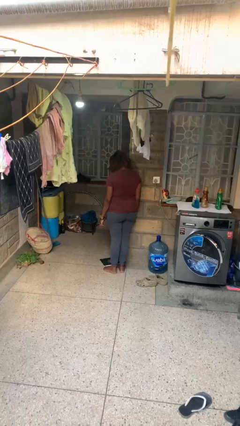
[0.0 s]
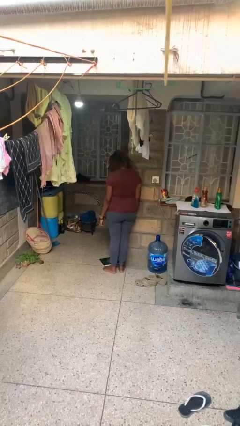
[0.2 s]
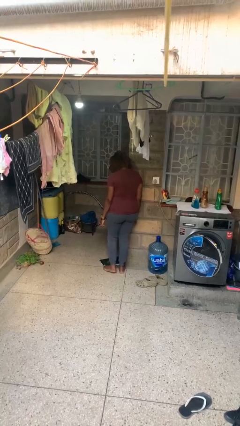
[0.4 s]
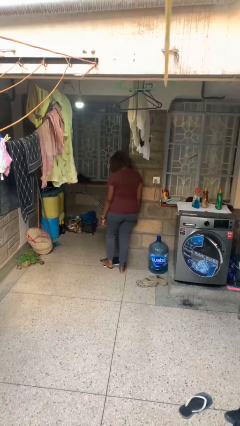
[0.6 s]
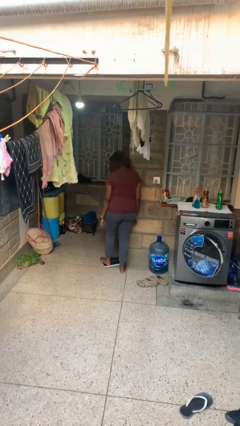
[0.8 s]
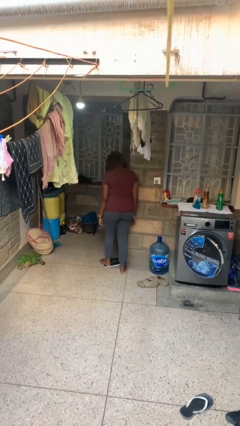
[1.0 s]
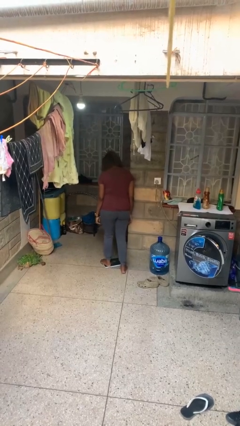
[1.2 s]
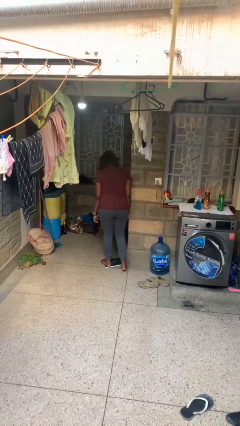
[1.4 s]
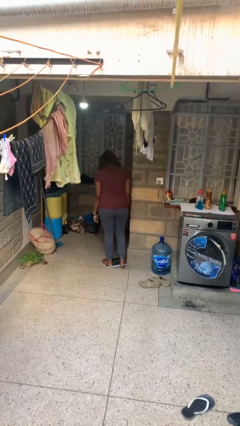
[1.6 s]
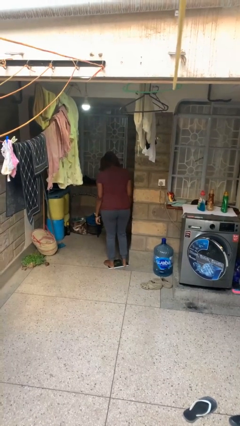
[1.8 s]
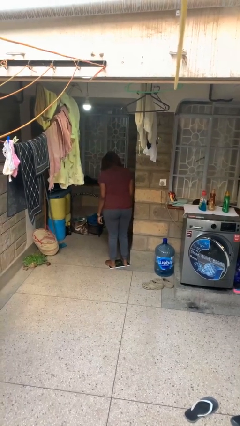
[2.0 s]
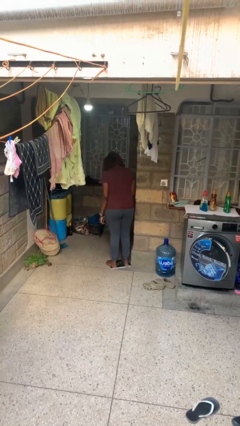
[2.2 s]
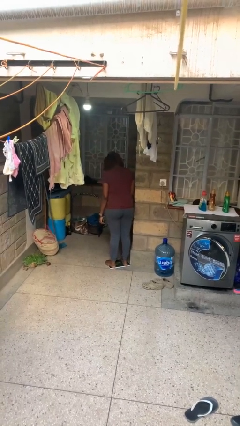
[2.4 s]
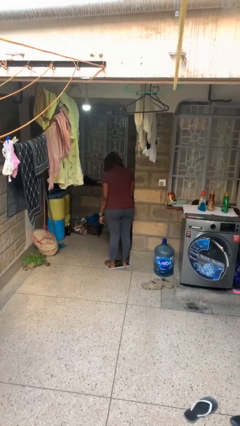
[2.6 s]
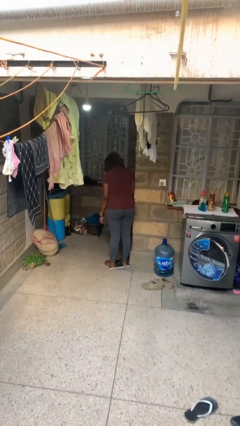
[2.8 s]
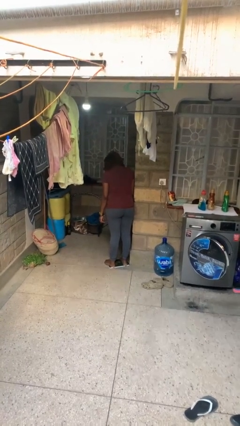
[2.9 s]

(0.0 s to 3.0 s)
person uses bodyweight scale

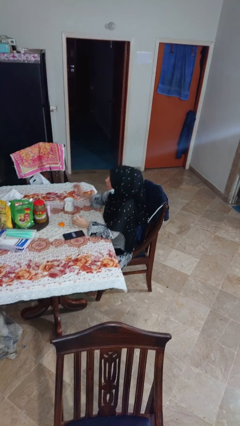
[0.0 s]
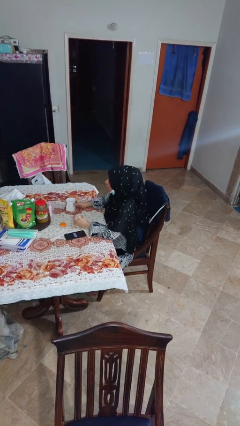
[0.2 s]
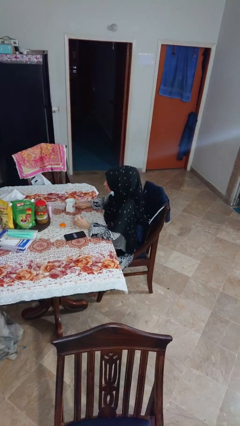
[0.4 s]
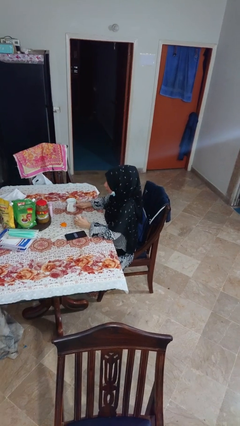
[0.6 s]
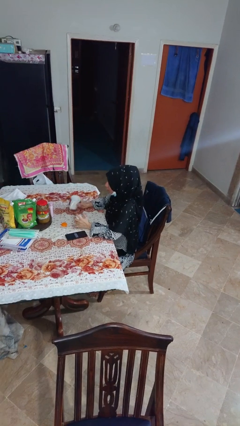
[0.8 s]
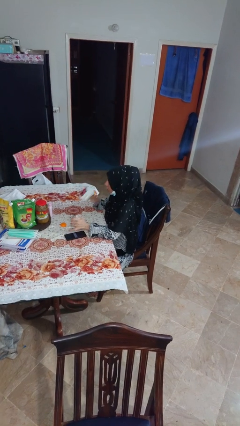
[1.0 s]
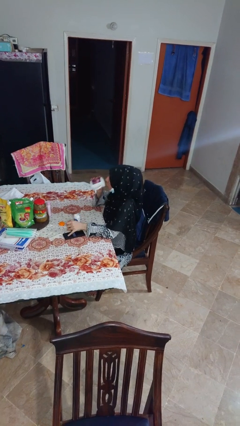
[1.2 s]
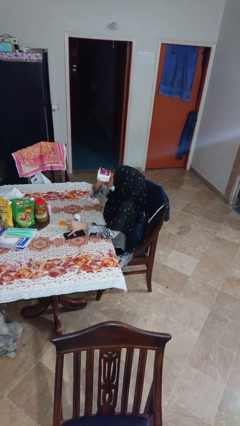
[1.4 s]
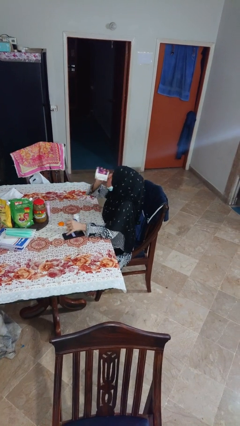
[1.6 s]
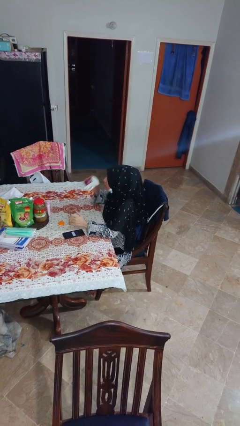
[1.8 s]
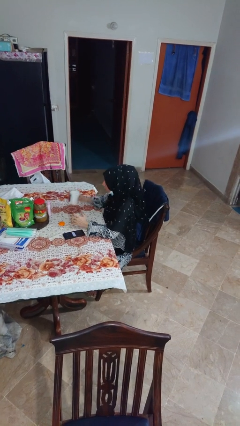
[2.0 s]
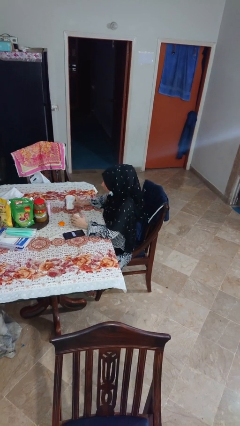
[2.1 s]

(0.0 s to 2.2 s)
person drinks from cup

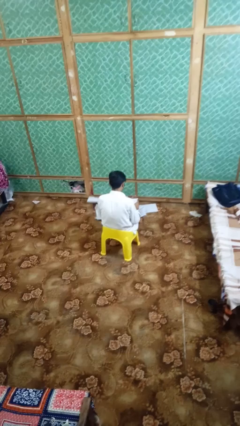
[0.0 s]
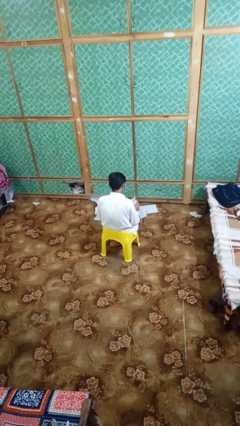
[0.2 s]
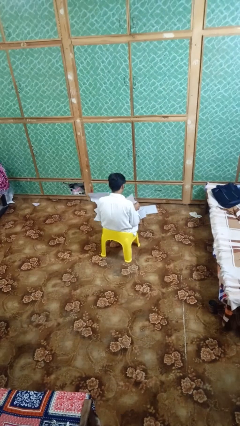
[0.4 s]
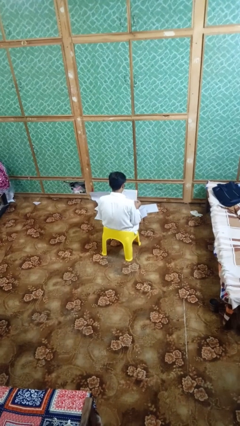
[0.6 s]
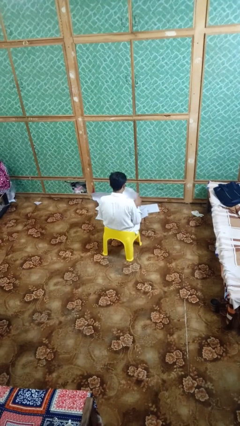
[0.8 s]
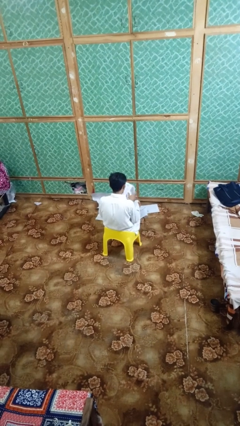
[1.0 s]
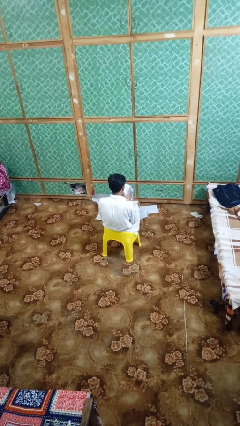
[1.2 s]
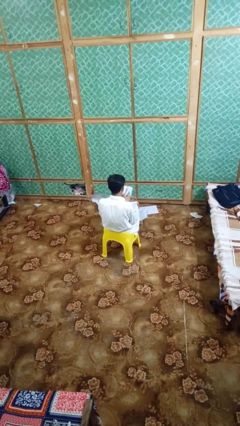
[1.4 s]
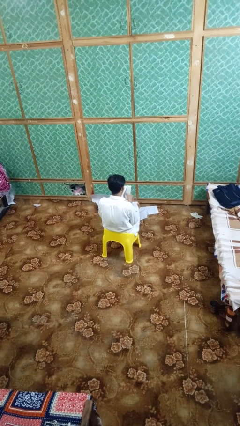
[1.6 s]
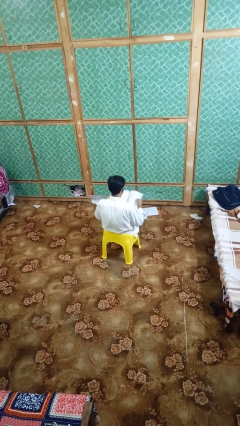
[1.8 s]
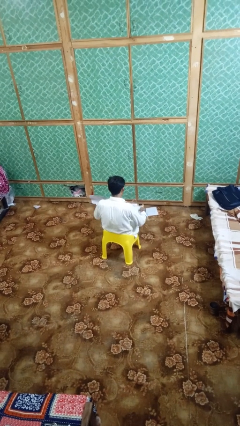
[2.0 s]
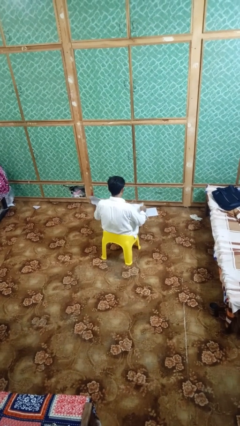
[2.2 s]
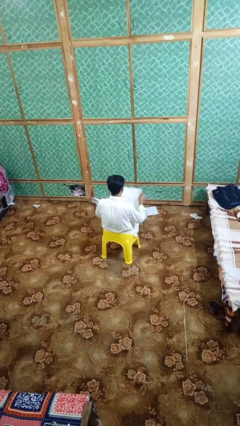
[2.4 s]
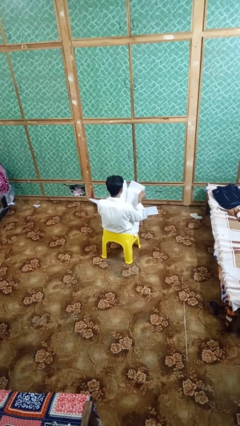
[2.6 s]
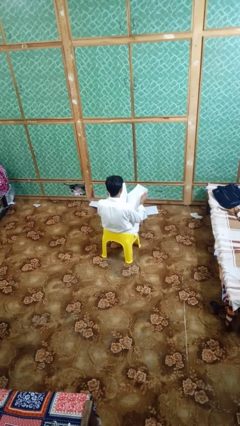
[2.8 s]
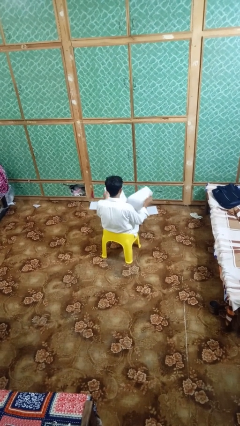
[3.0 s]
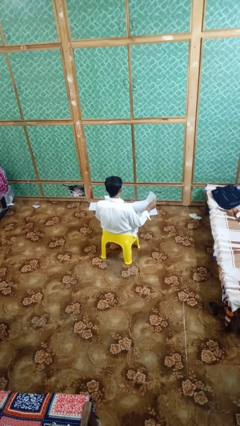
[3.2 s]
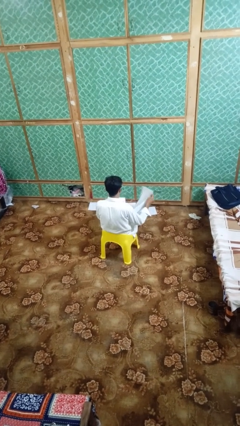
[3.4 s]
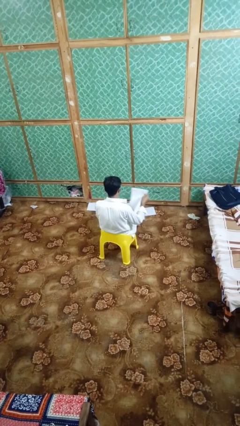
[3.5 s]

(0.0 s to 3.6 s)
person tears paper

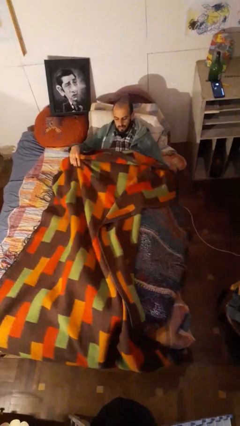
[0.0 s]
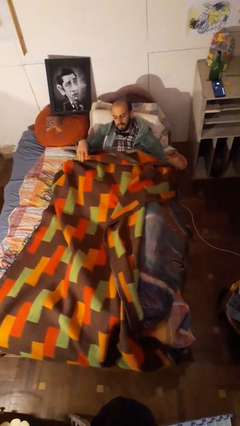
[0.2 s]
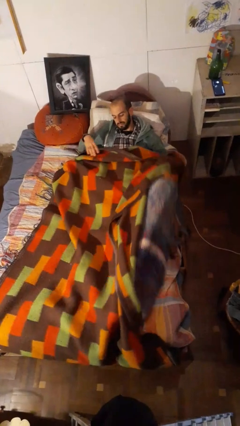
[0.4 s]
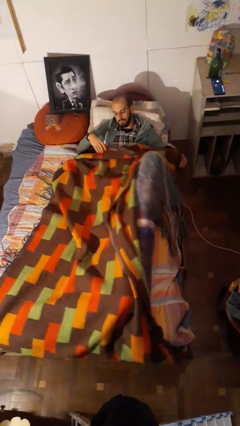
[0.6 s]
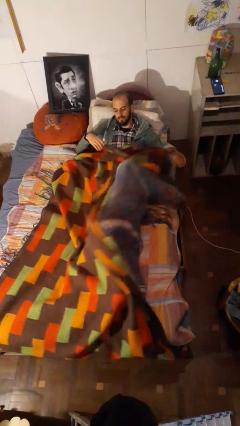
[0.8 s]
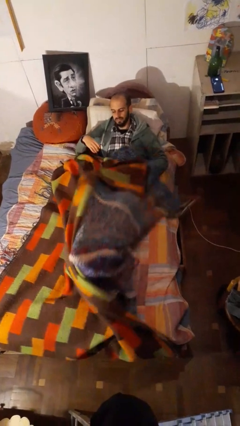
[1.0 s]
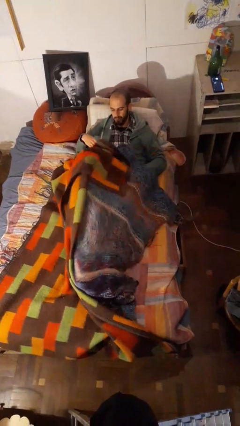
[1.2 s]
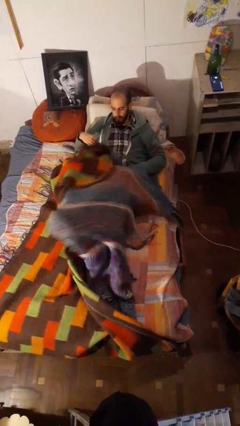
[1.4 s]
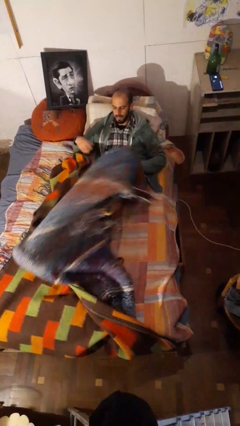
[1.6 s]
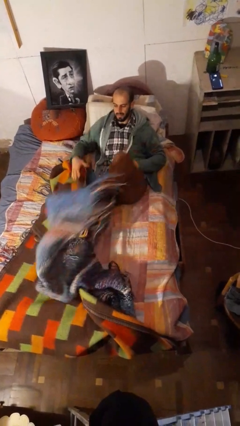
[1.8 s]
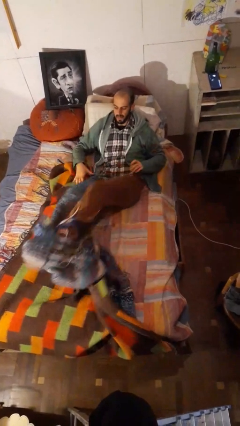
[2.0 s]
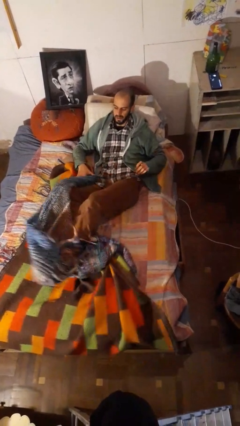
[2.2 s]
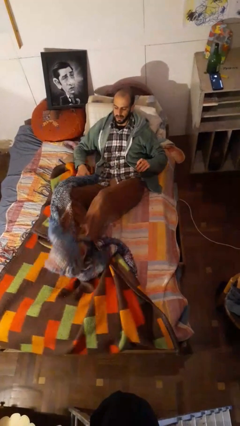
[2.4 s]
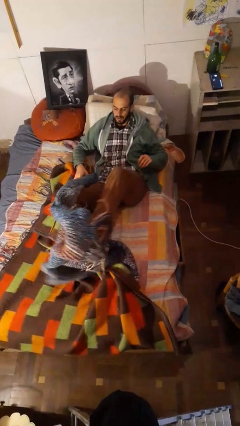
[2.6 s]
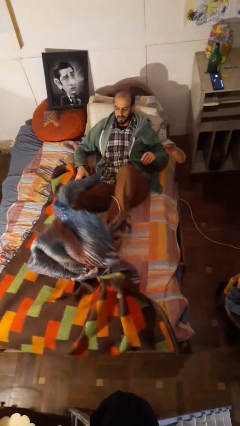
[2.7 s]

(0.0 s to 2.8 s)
person uncovers with bedsheets

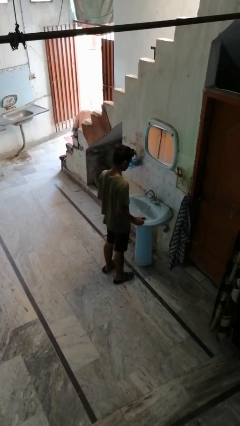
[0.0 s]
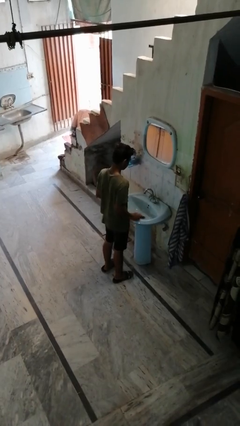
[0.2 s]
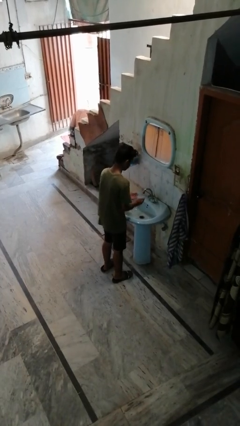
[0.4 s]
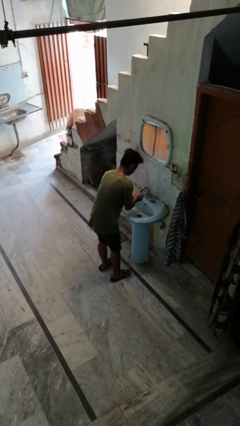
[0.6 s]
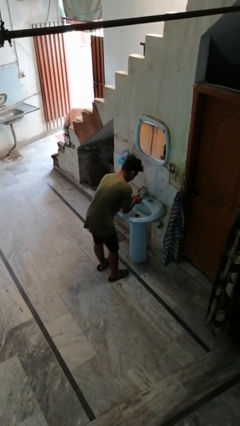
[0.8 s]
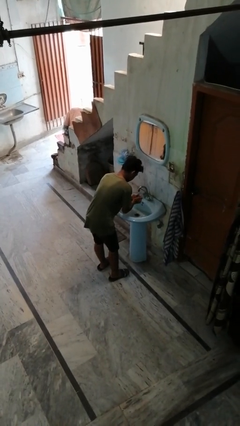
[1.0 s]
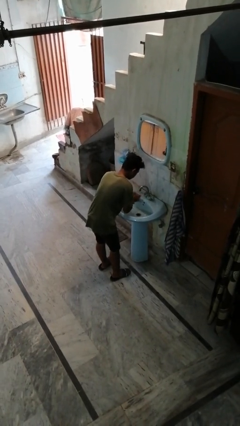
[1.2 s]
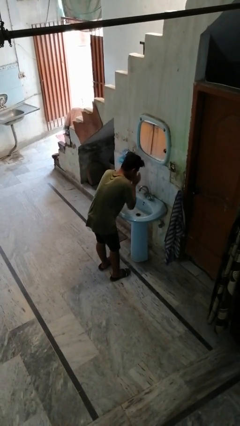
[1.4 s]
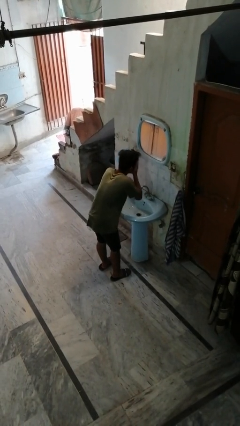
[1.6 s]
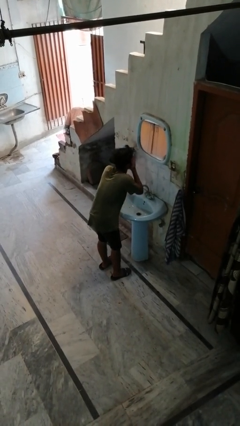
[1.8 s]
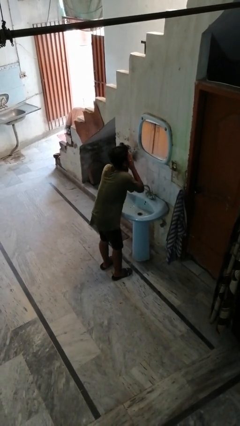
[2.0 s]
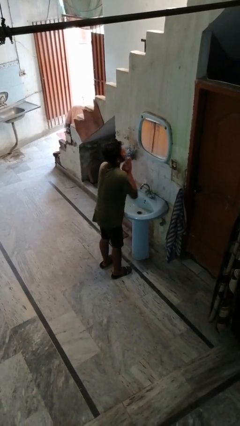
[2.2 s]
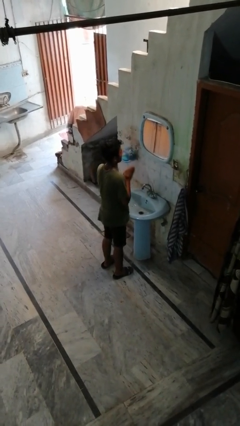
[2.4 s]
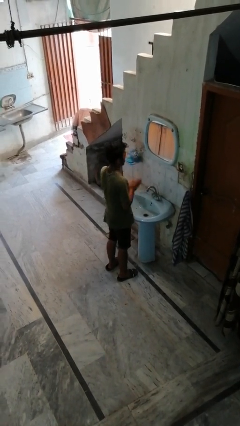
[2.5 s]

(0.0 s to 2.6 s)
person washes face

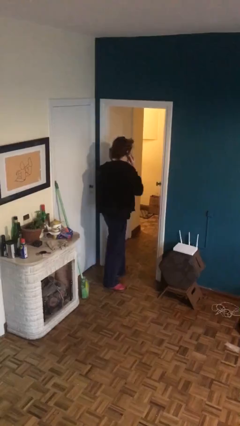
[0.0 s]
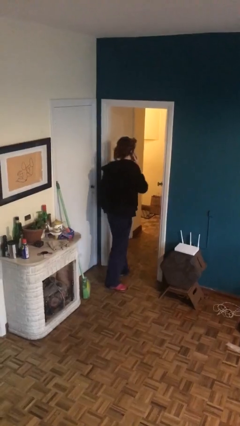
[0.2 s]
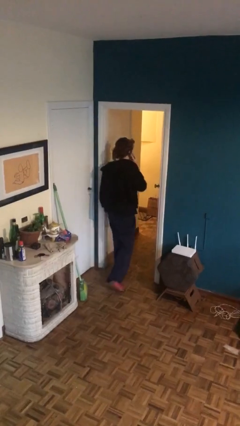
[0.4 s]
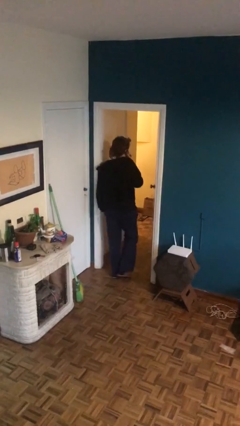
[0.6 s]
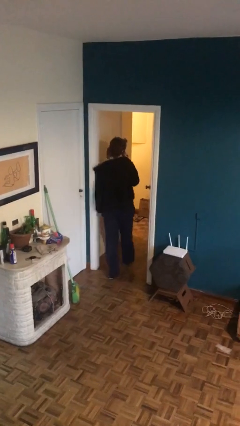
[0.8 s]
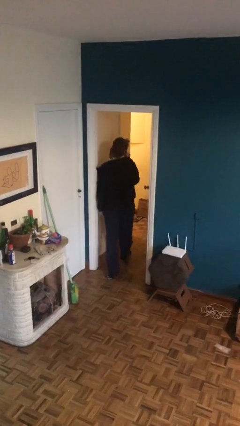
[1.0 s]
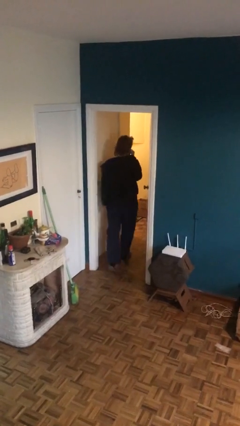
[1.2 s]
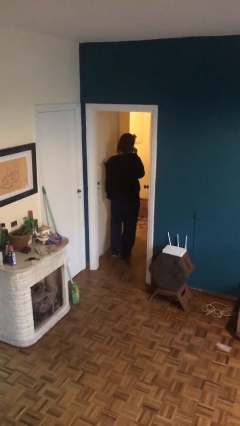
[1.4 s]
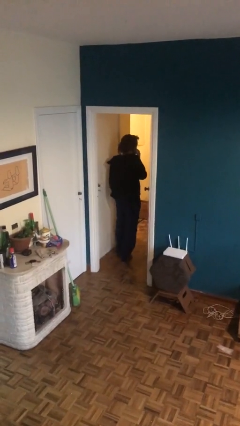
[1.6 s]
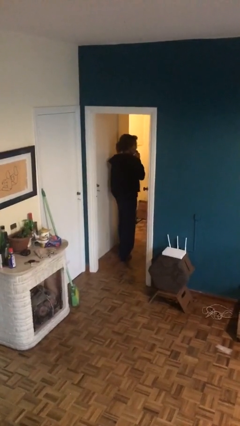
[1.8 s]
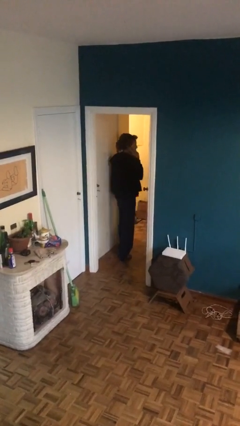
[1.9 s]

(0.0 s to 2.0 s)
person exits scene through structure

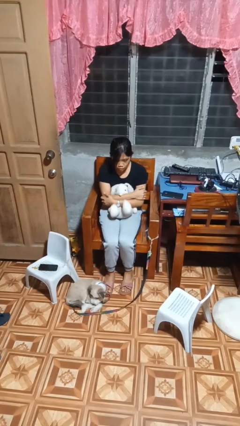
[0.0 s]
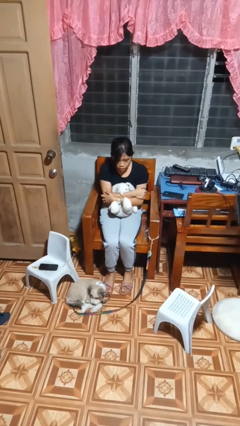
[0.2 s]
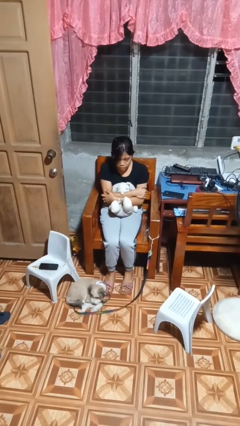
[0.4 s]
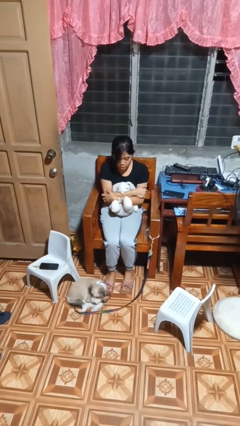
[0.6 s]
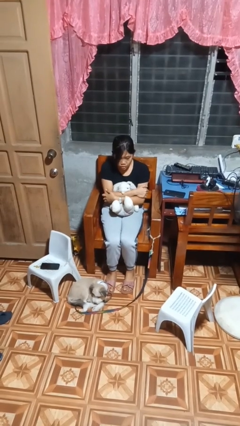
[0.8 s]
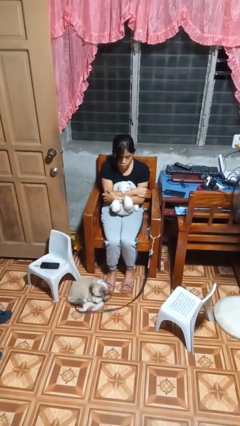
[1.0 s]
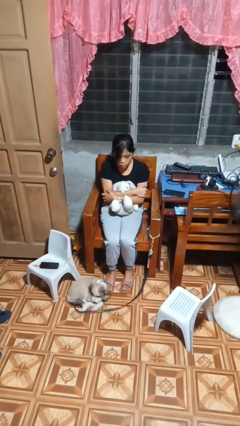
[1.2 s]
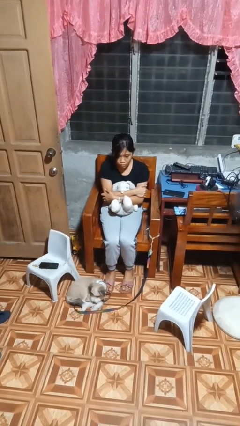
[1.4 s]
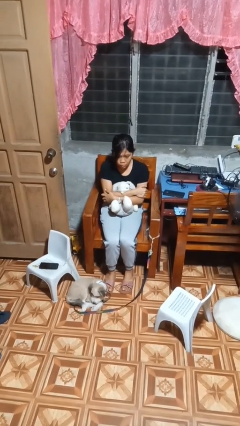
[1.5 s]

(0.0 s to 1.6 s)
person hugs stuffed animal
